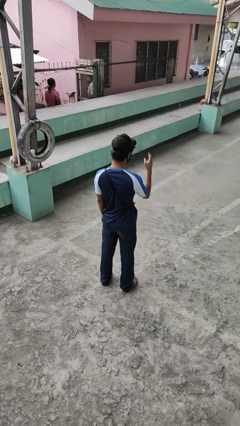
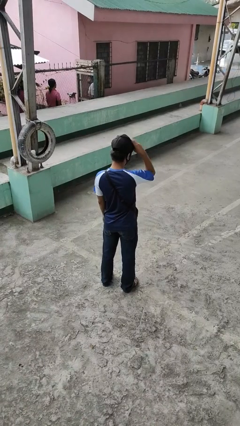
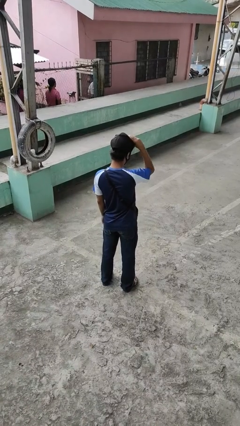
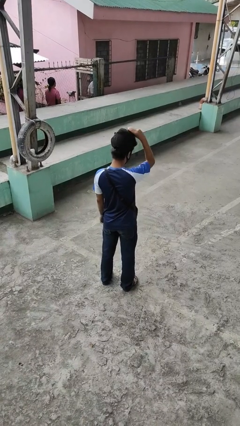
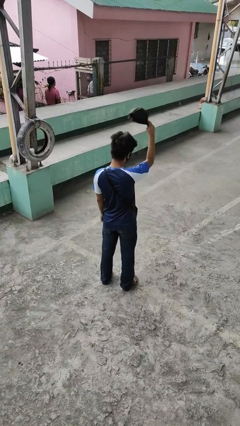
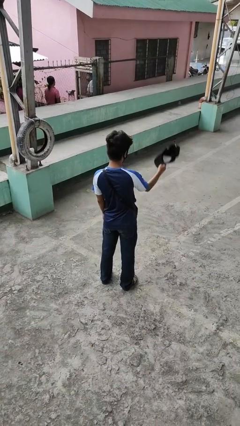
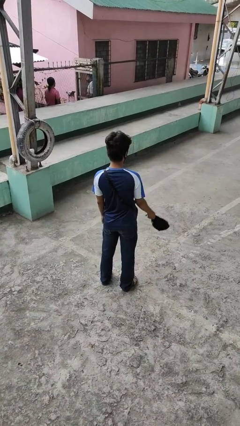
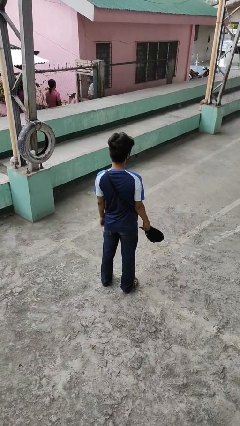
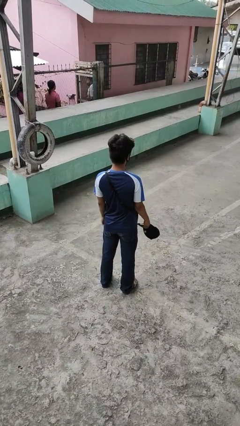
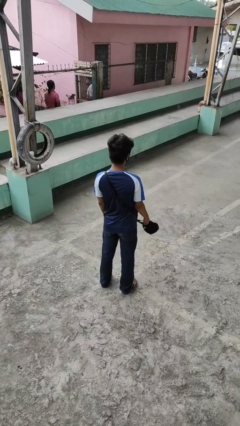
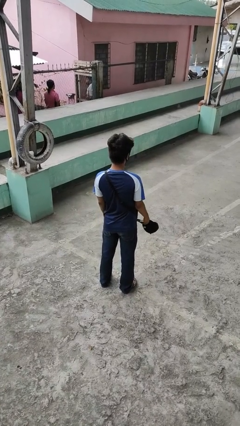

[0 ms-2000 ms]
person takes off hat

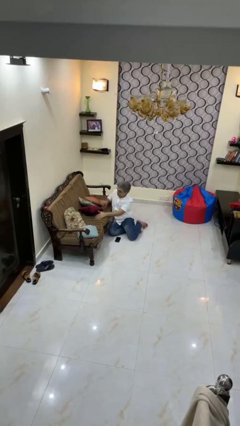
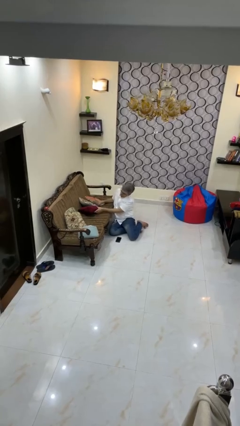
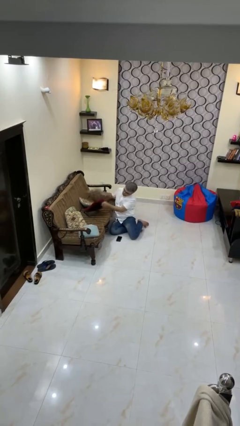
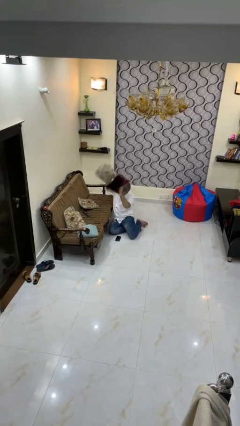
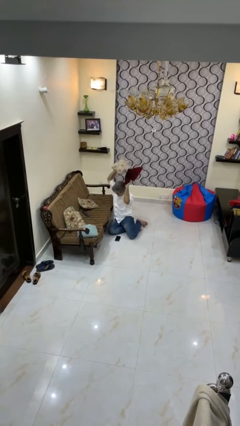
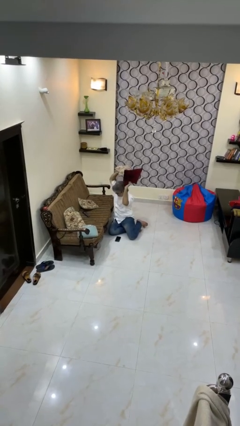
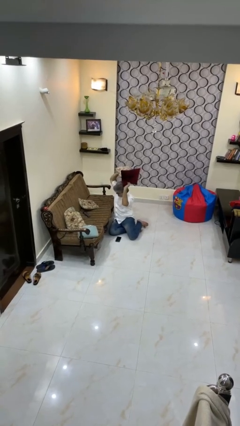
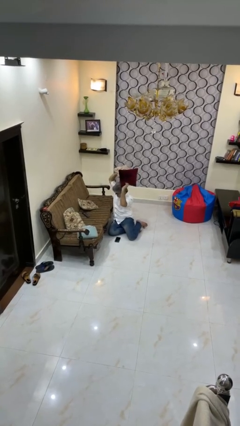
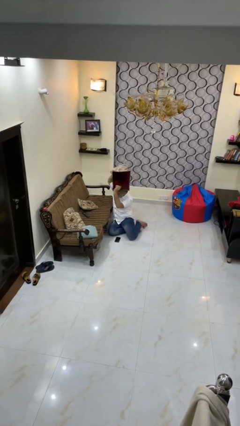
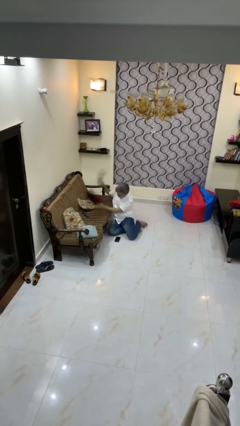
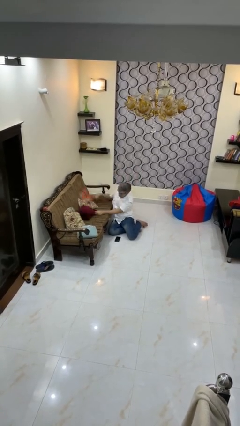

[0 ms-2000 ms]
person searches in couch

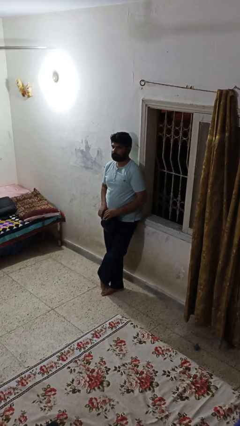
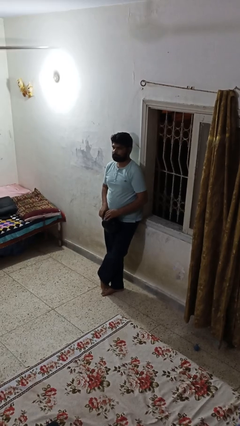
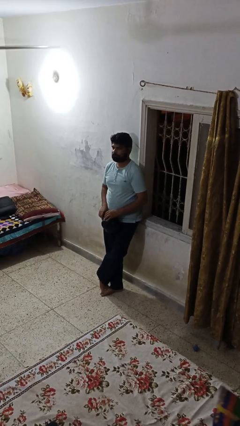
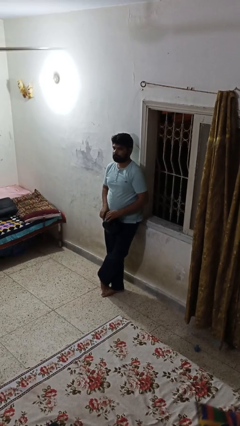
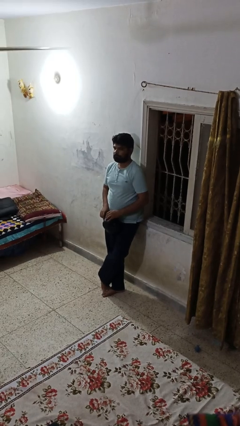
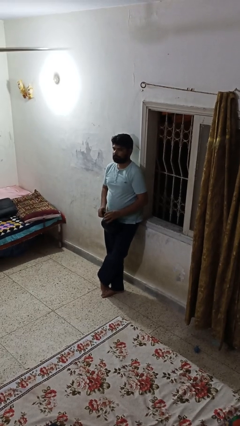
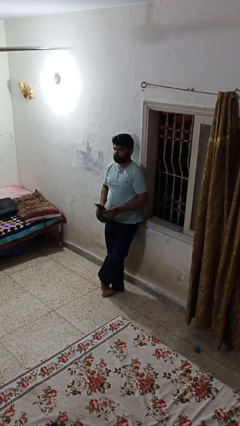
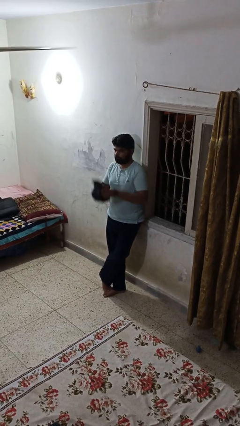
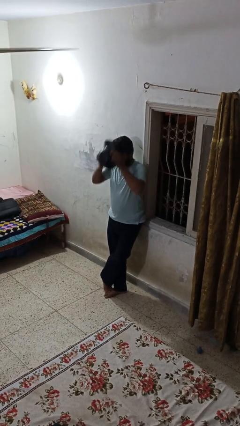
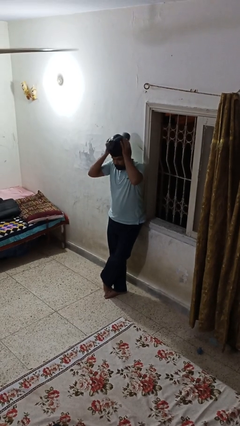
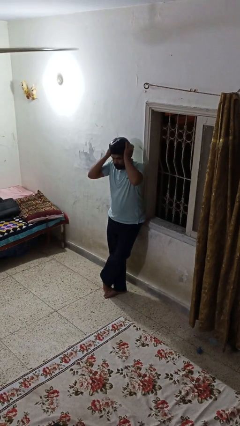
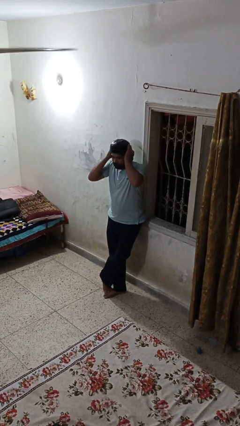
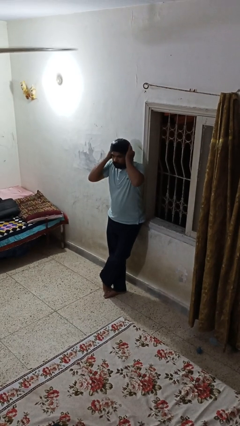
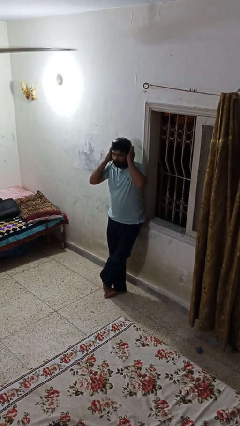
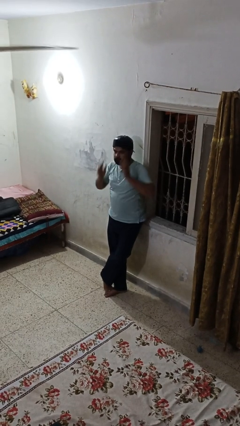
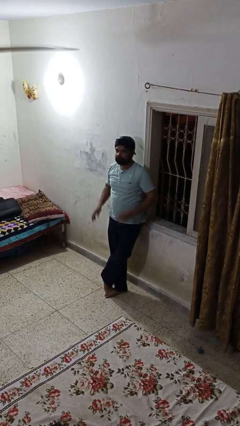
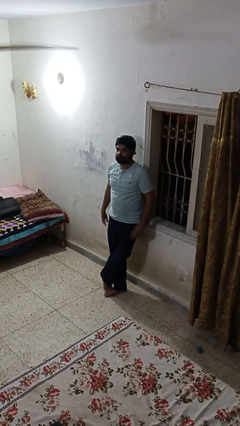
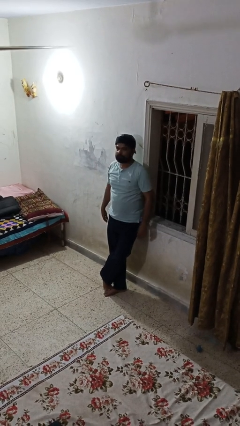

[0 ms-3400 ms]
person puts on hat

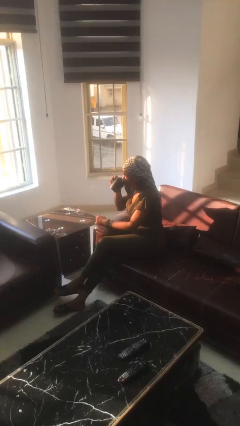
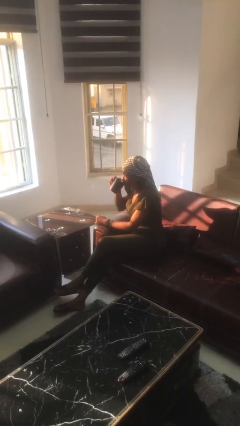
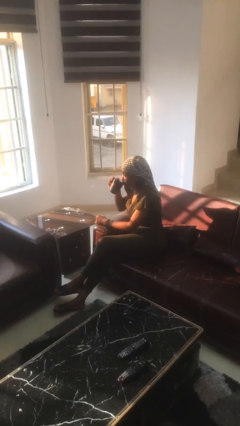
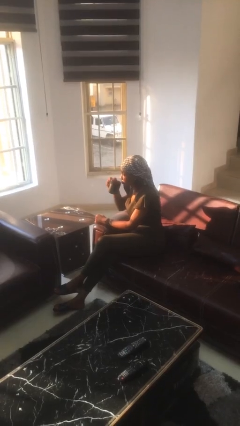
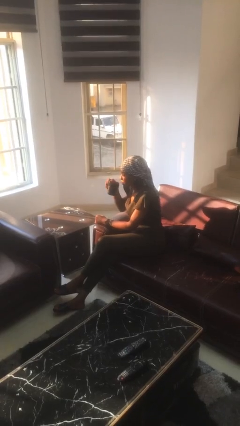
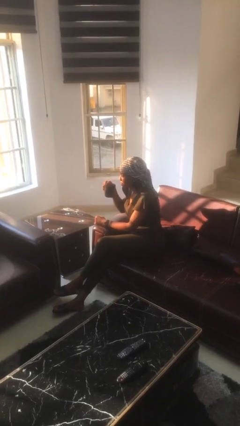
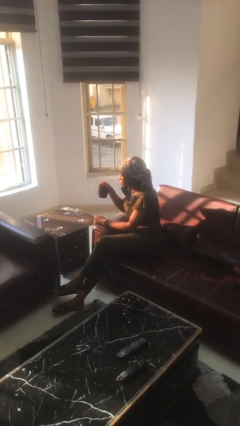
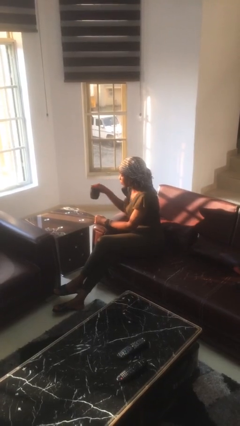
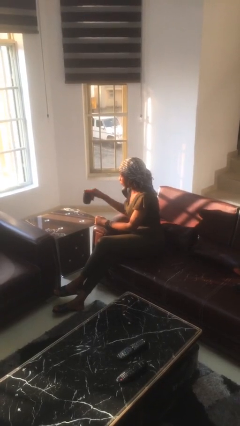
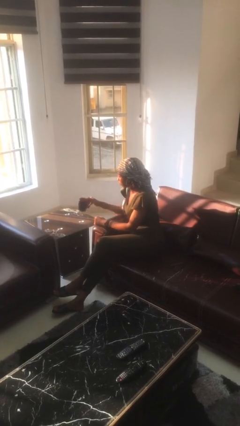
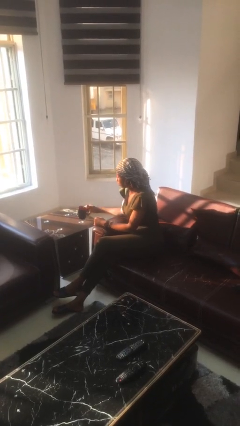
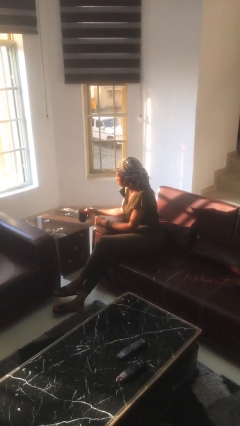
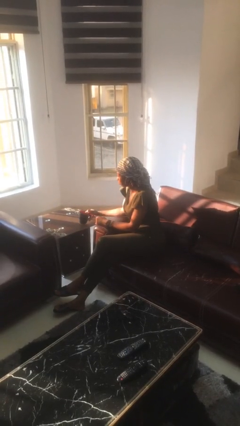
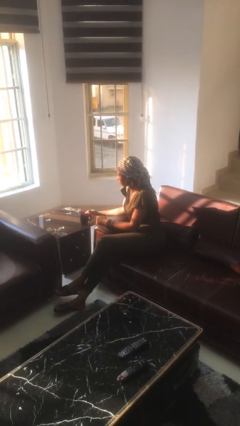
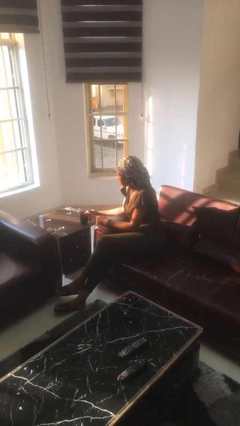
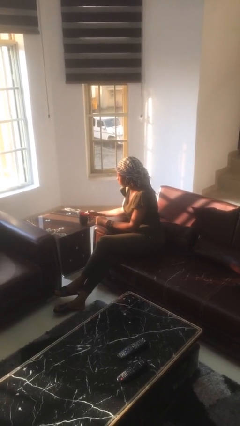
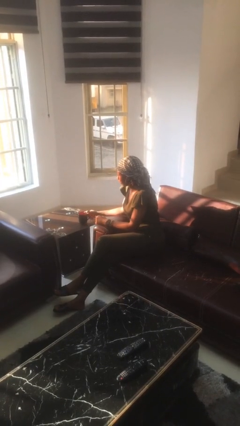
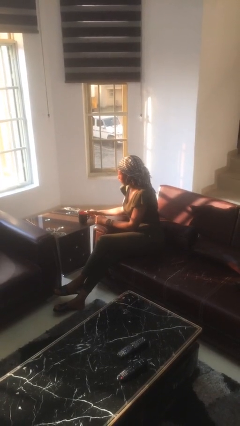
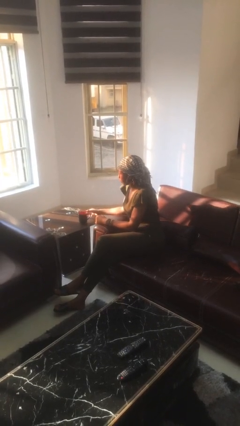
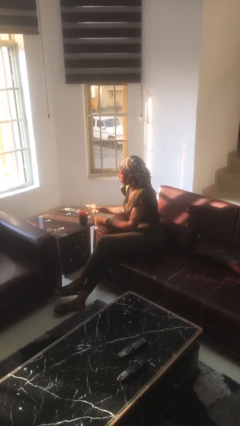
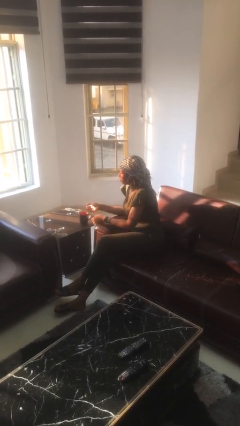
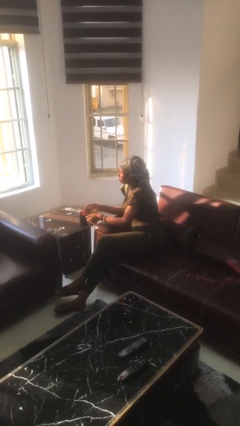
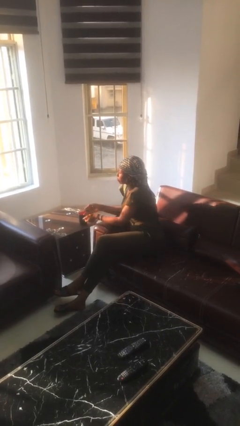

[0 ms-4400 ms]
person puts down object on table

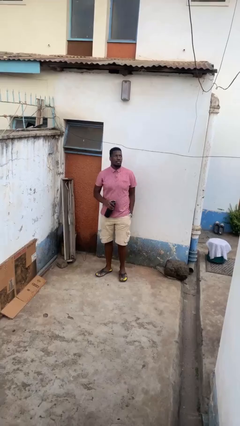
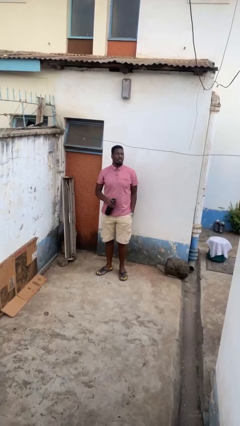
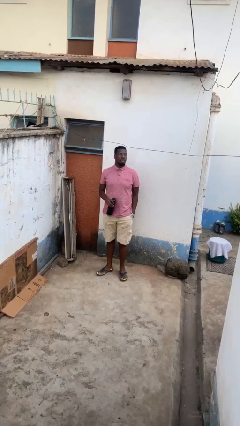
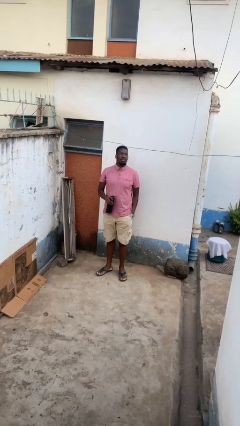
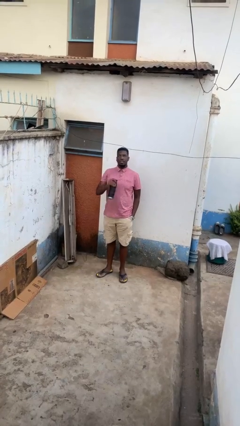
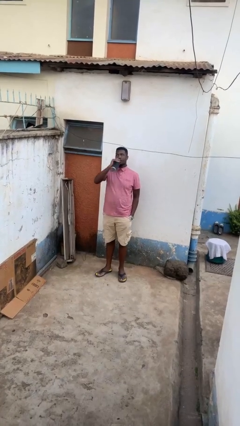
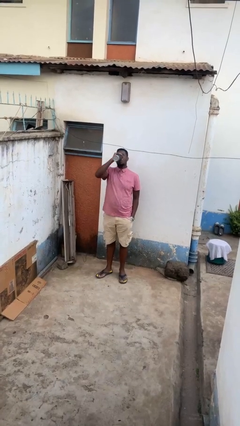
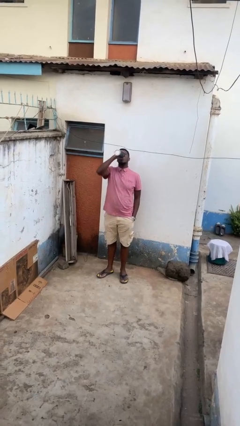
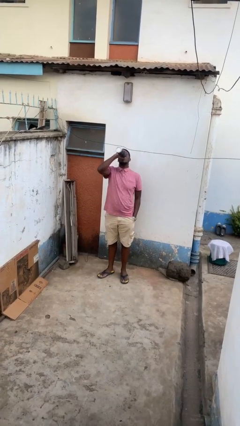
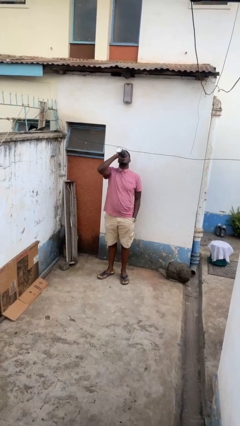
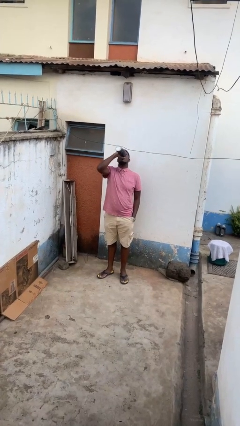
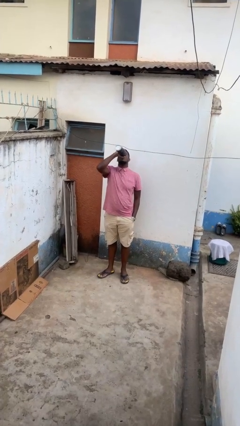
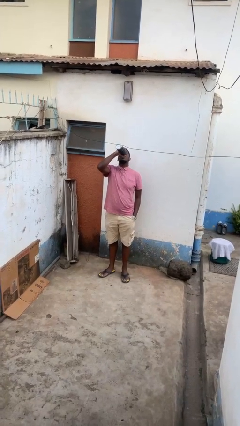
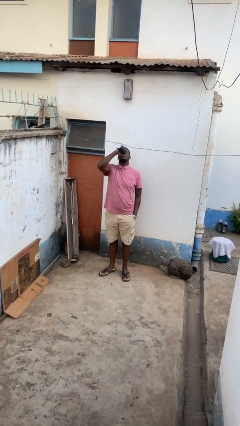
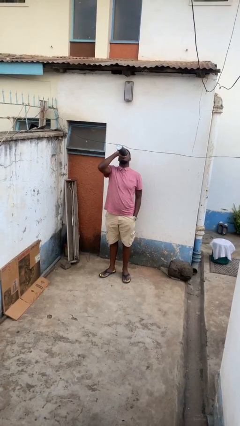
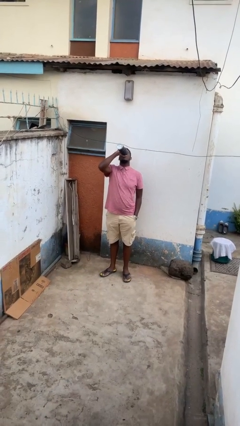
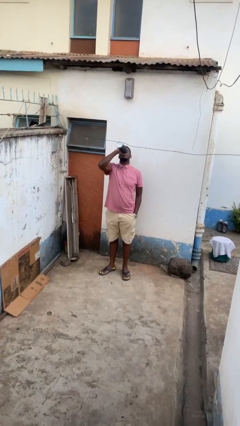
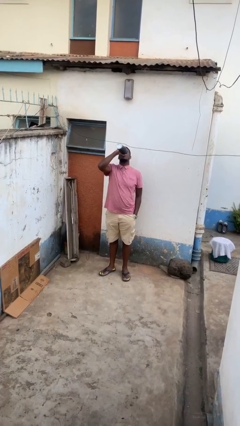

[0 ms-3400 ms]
person drinks from bottle

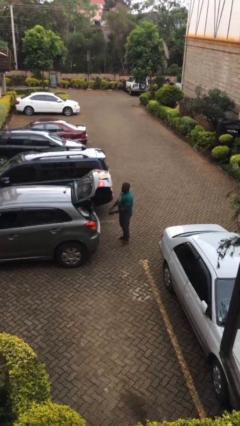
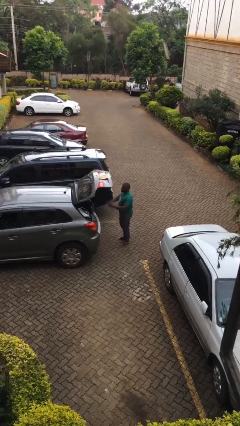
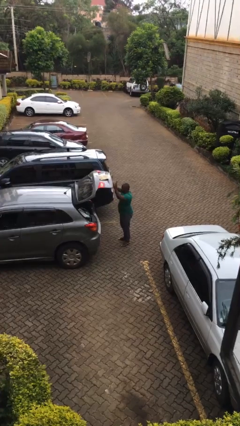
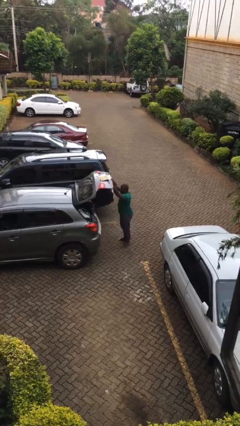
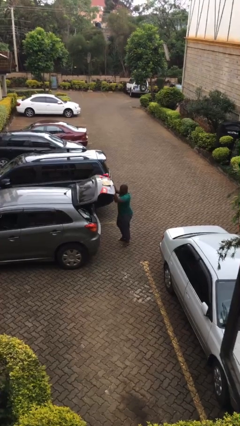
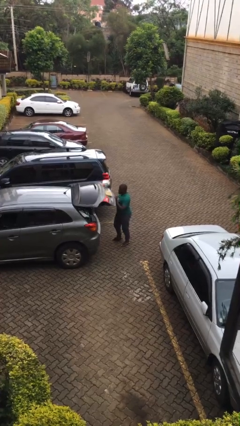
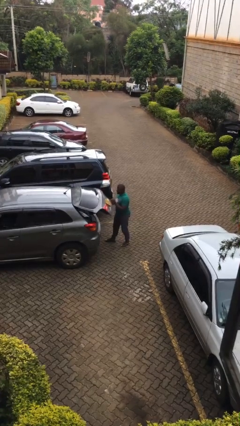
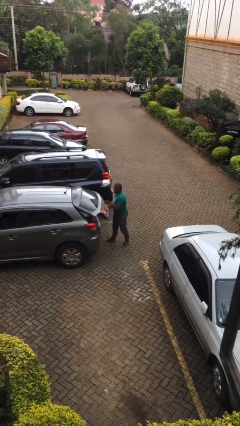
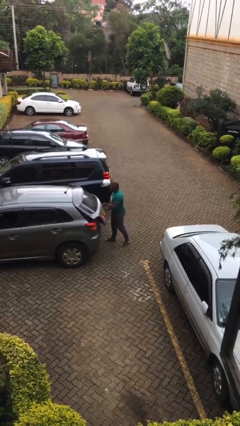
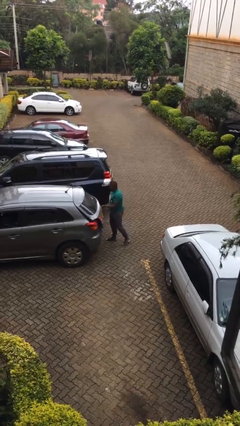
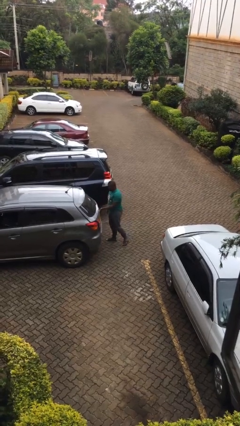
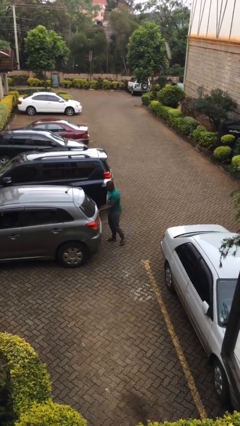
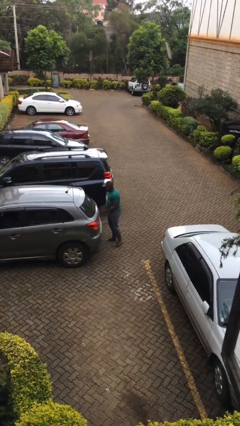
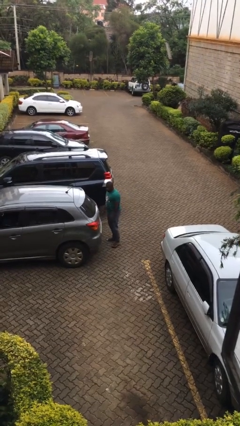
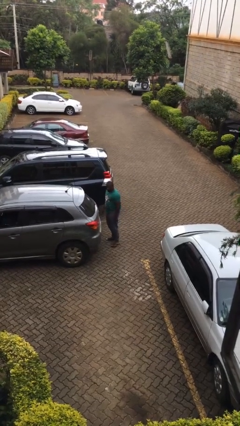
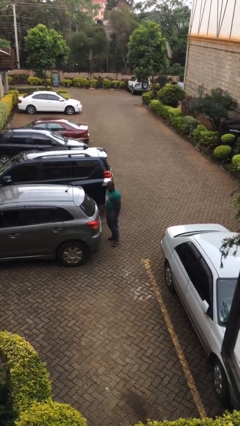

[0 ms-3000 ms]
person closes car trunk
